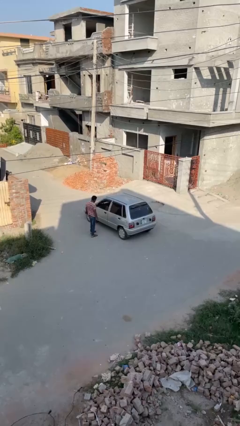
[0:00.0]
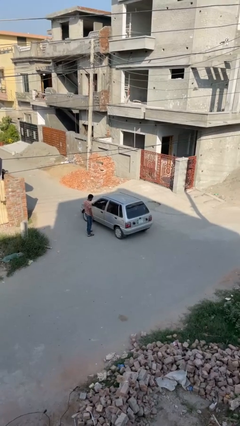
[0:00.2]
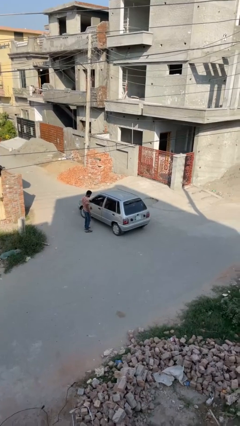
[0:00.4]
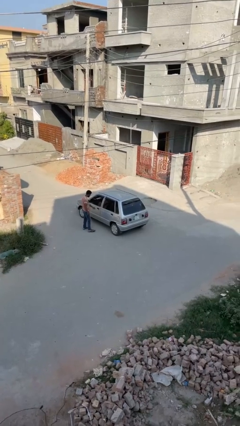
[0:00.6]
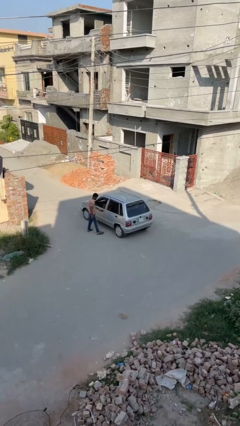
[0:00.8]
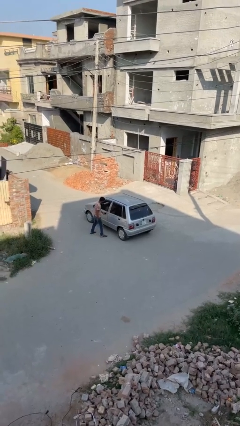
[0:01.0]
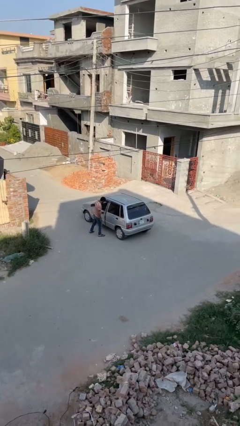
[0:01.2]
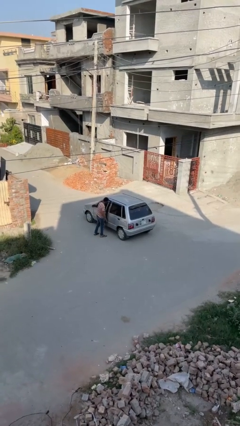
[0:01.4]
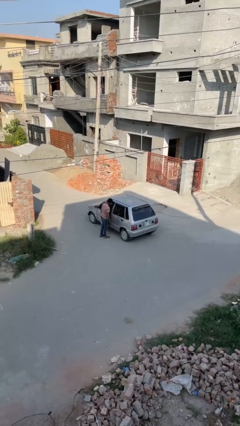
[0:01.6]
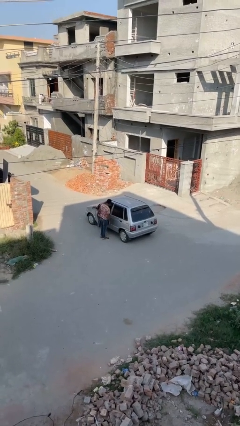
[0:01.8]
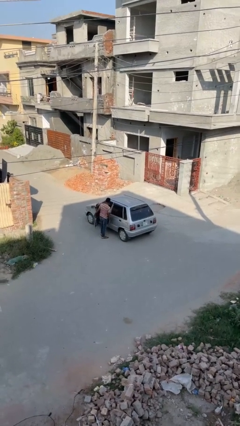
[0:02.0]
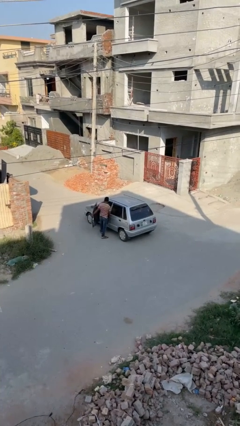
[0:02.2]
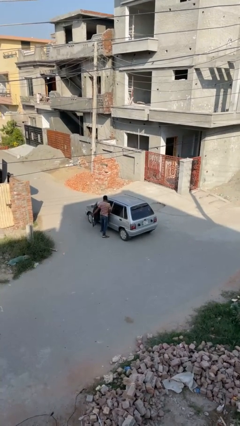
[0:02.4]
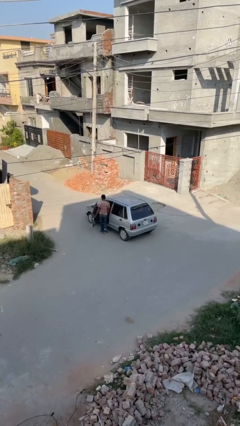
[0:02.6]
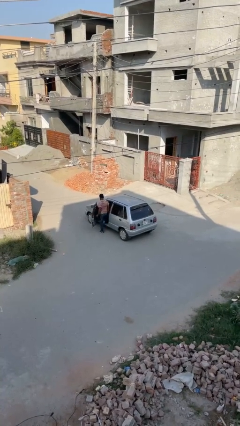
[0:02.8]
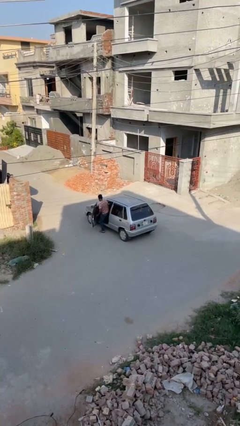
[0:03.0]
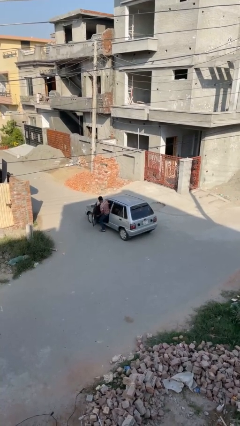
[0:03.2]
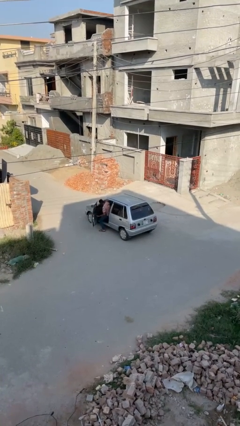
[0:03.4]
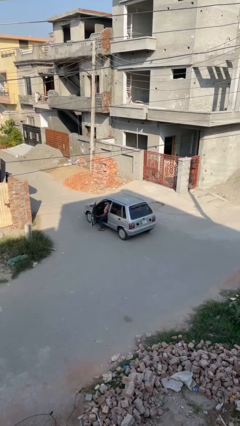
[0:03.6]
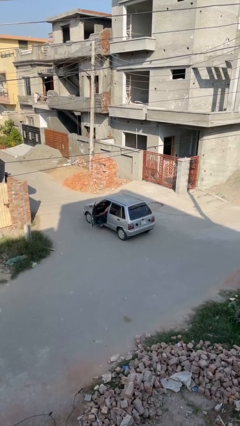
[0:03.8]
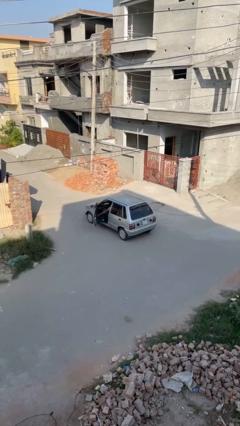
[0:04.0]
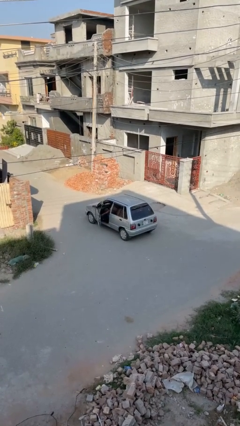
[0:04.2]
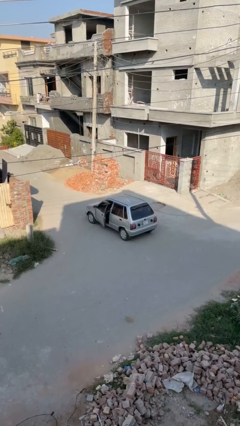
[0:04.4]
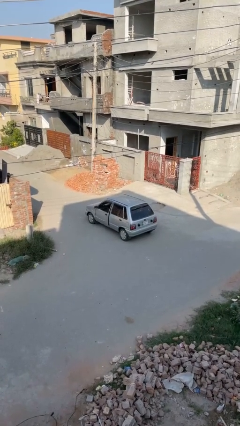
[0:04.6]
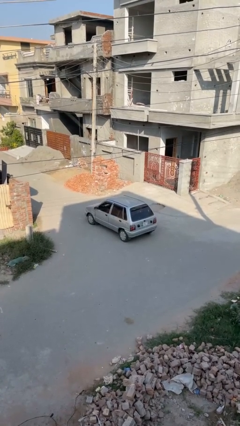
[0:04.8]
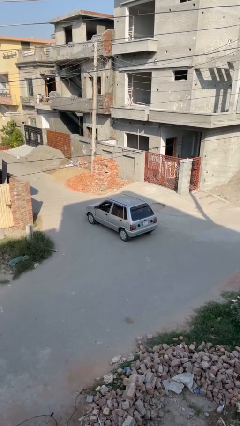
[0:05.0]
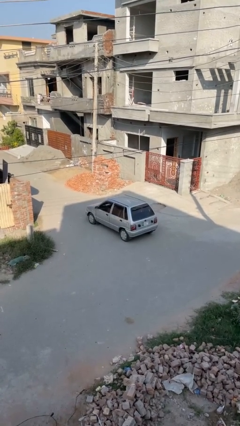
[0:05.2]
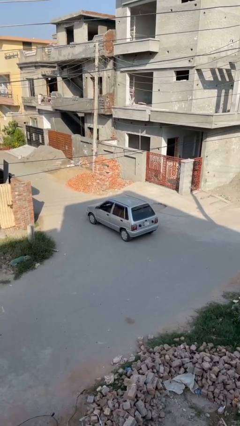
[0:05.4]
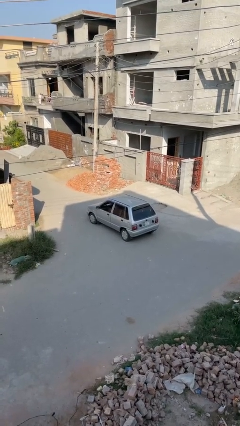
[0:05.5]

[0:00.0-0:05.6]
car picks up person

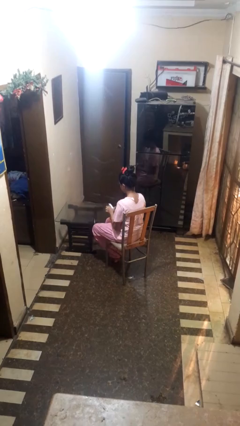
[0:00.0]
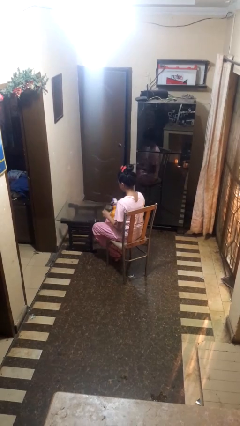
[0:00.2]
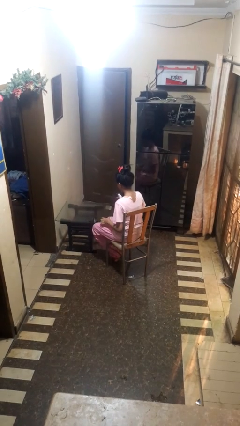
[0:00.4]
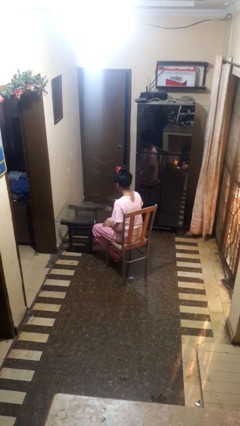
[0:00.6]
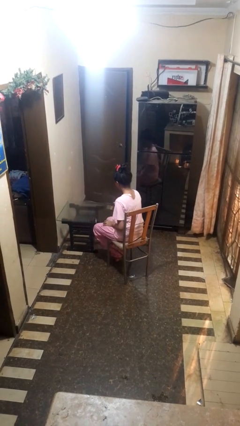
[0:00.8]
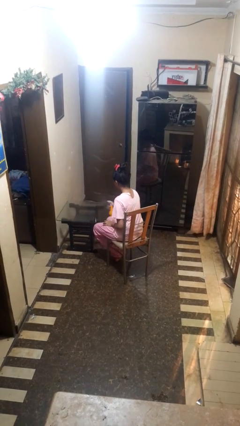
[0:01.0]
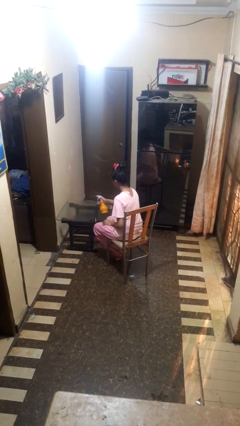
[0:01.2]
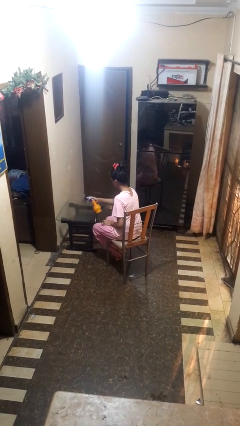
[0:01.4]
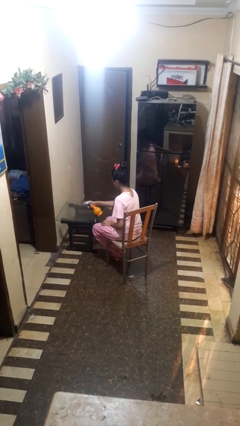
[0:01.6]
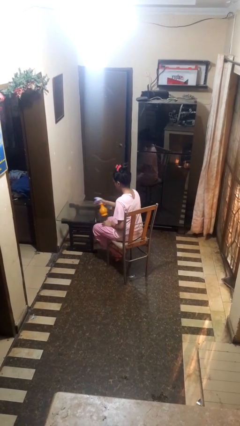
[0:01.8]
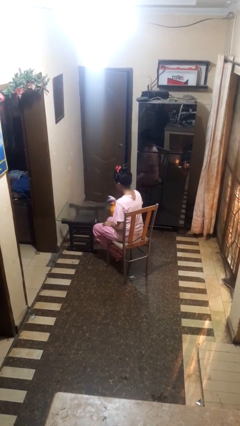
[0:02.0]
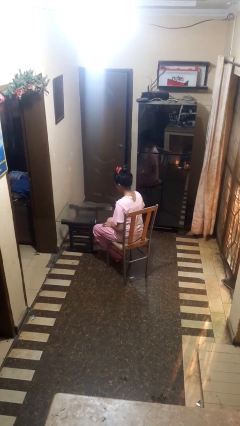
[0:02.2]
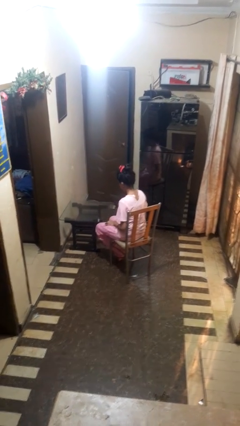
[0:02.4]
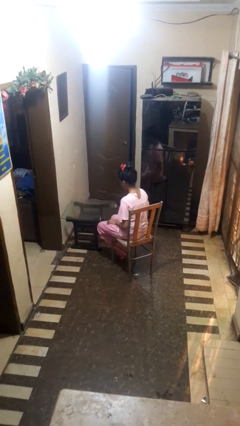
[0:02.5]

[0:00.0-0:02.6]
person sprays from bottle

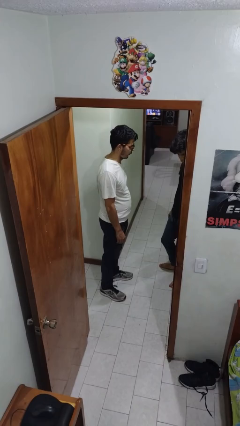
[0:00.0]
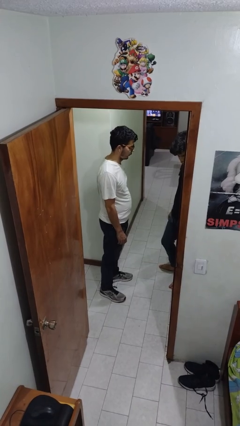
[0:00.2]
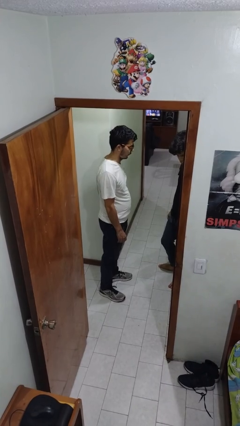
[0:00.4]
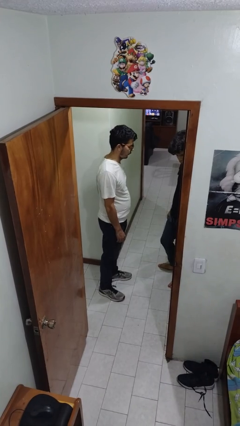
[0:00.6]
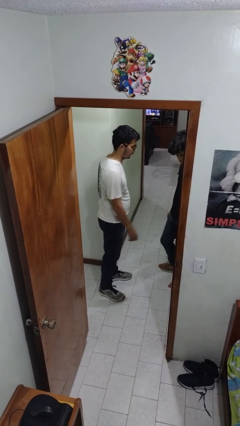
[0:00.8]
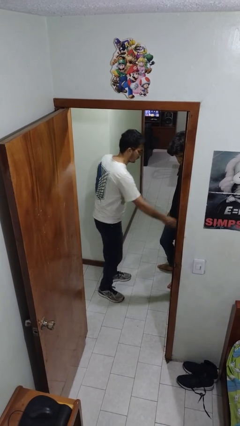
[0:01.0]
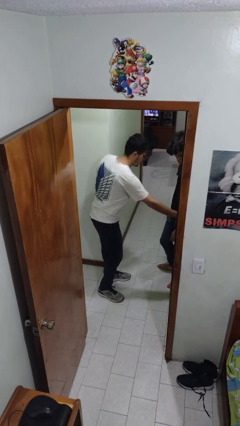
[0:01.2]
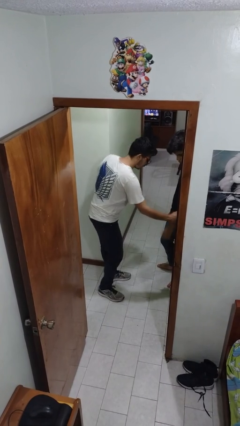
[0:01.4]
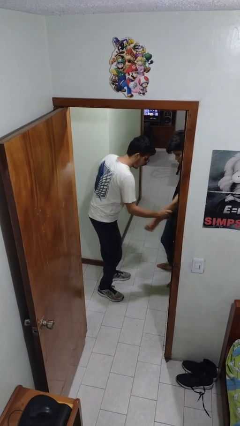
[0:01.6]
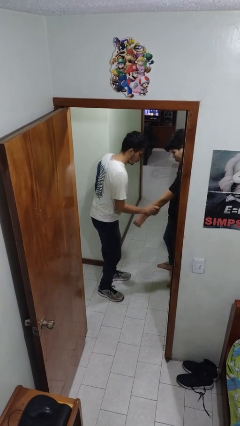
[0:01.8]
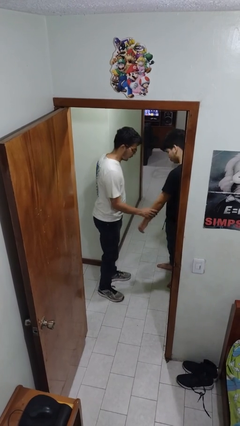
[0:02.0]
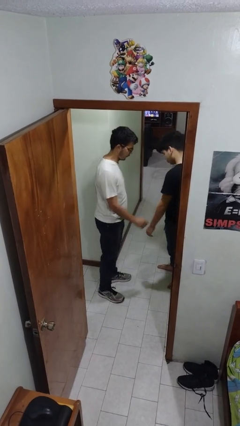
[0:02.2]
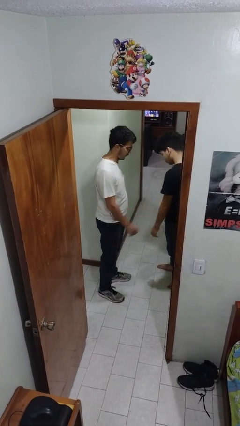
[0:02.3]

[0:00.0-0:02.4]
person grabs person by forearm

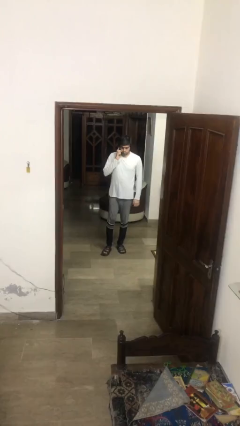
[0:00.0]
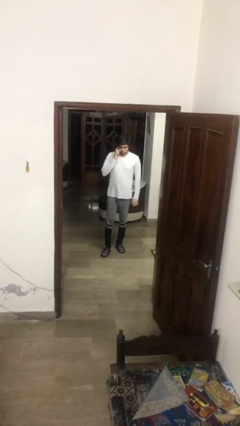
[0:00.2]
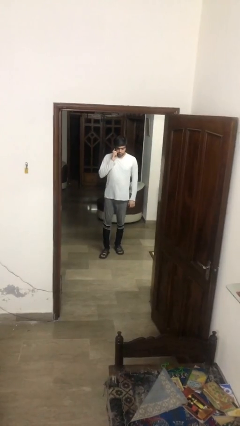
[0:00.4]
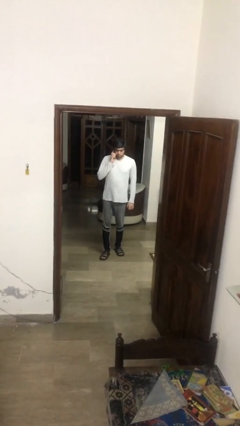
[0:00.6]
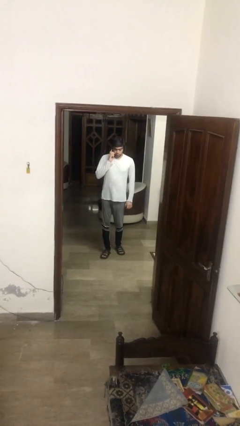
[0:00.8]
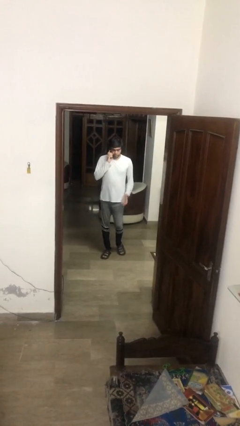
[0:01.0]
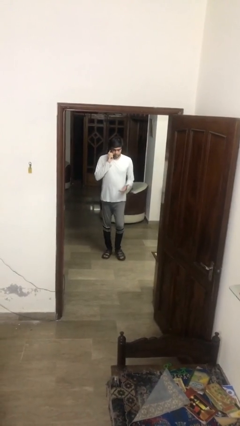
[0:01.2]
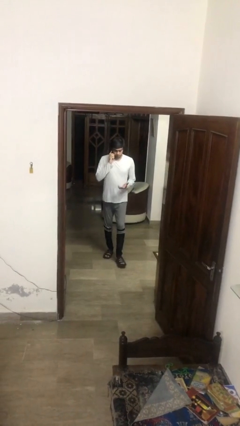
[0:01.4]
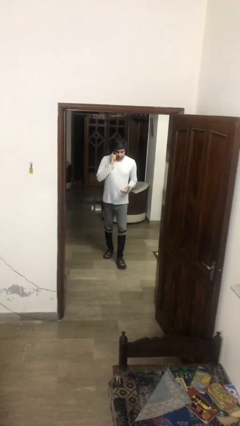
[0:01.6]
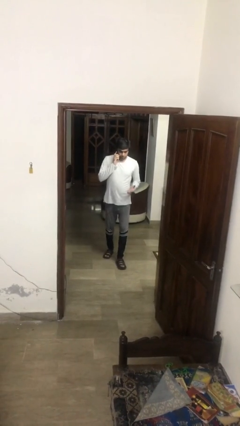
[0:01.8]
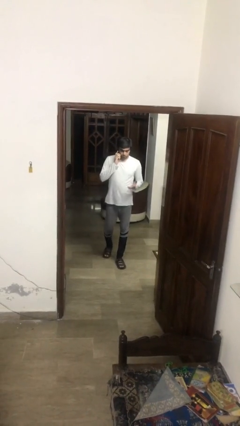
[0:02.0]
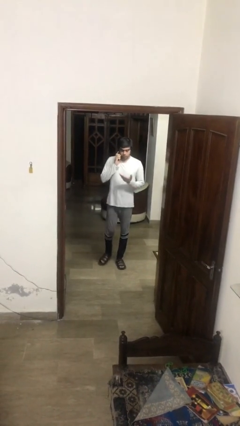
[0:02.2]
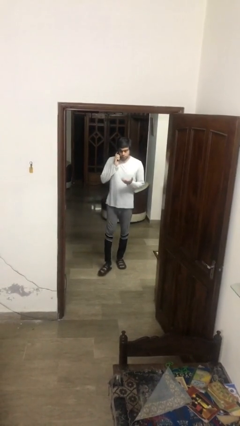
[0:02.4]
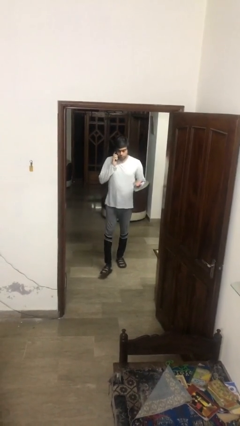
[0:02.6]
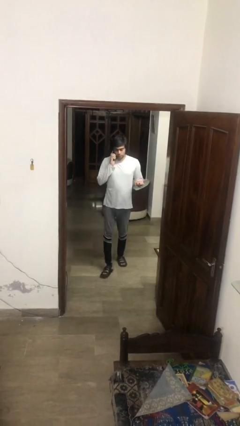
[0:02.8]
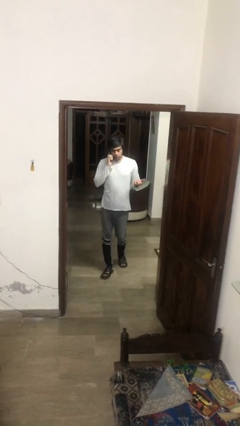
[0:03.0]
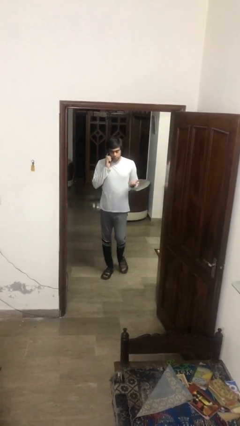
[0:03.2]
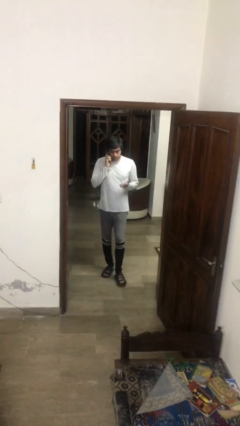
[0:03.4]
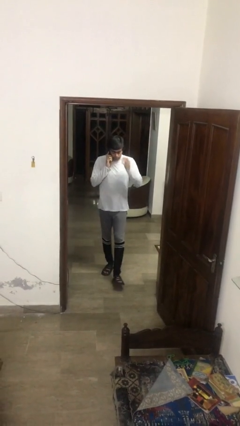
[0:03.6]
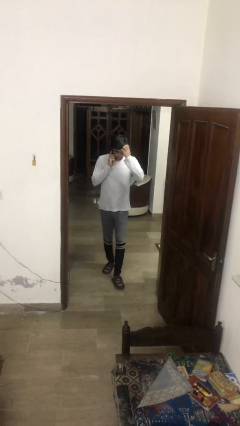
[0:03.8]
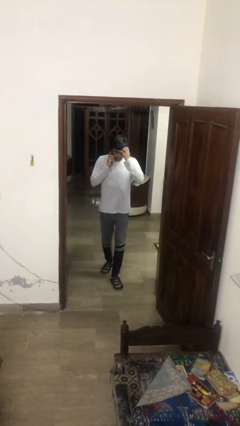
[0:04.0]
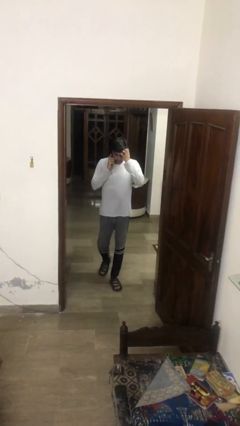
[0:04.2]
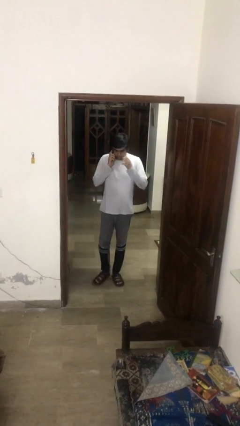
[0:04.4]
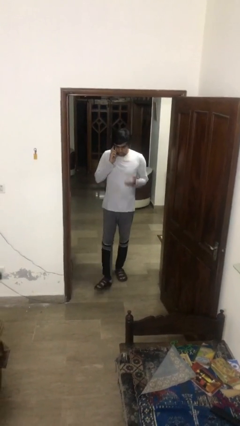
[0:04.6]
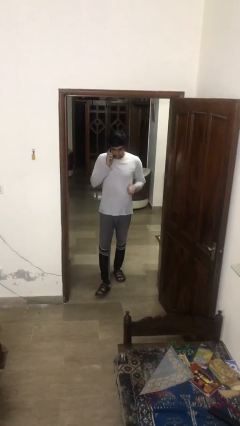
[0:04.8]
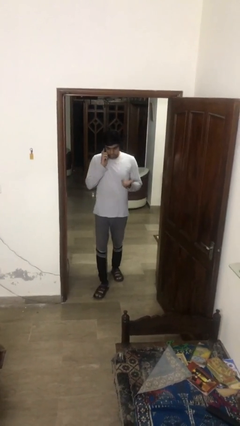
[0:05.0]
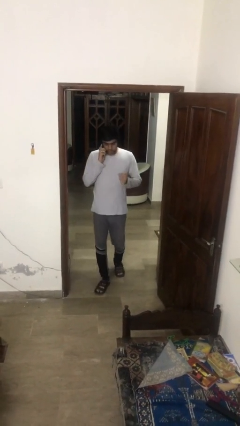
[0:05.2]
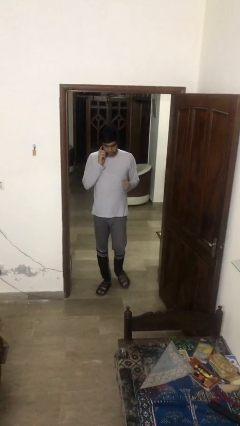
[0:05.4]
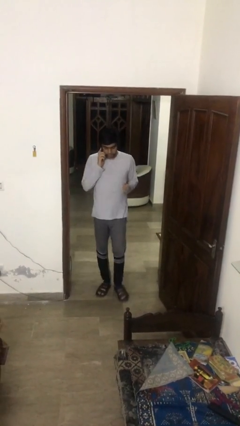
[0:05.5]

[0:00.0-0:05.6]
person enters scene through structure

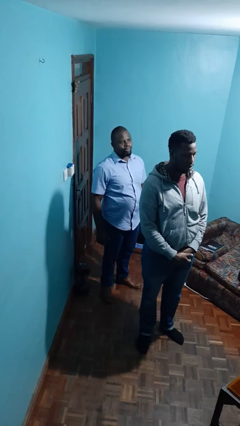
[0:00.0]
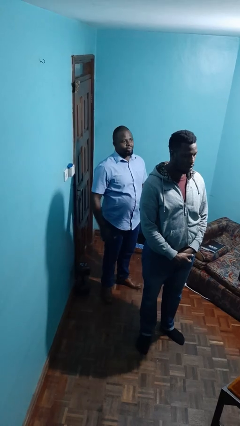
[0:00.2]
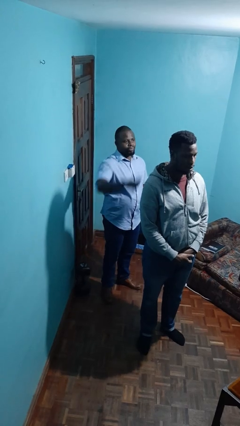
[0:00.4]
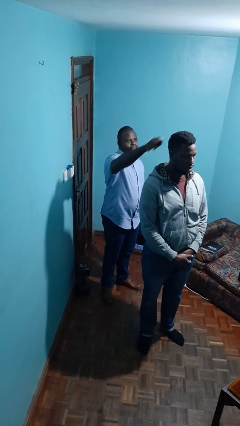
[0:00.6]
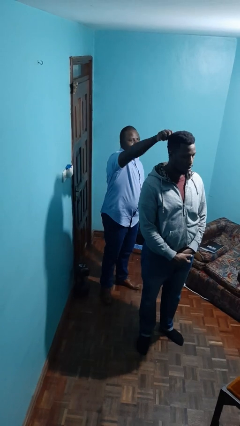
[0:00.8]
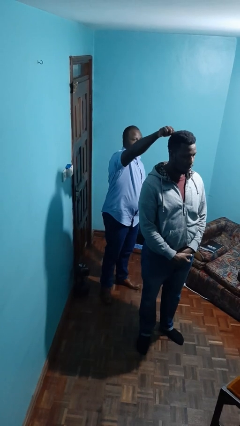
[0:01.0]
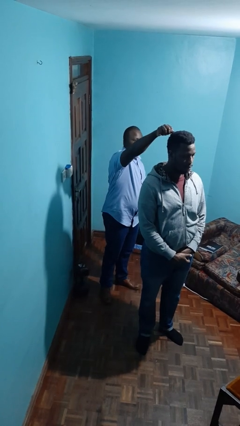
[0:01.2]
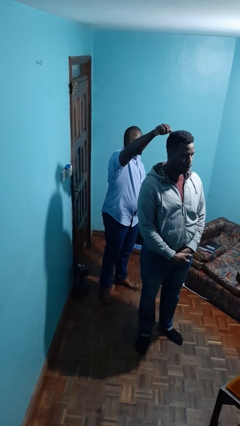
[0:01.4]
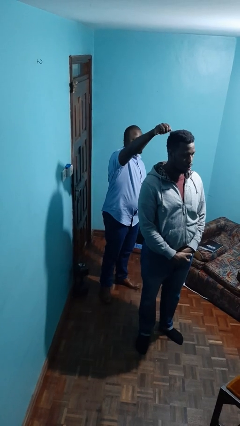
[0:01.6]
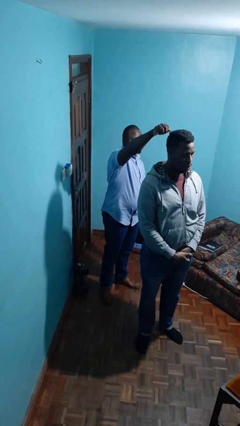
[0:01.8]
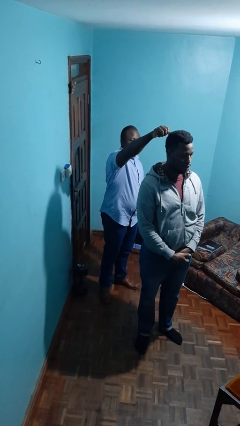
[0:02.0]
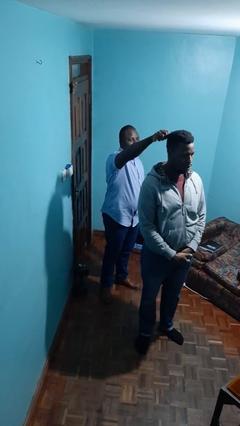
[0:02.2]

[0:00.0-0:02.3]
person grabs person by hair
